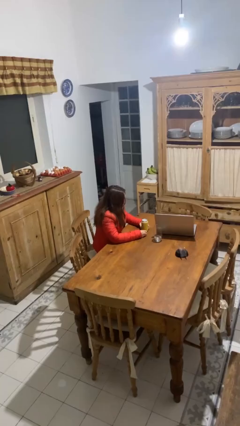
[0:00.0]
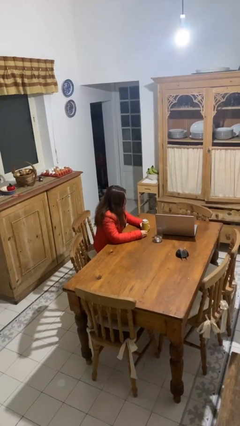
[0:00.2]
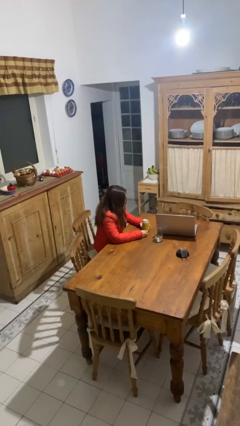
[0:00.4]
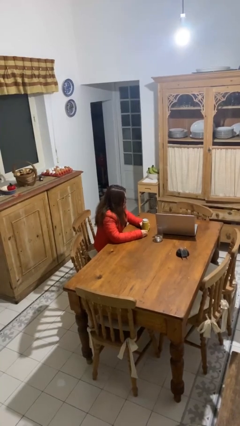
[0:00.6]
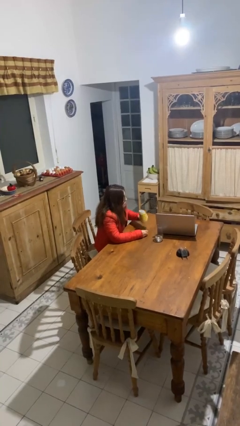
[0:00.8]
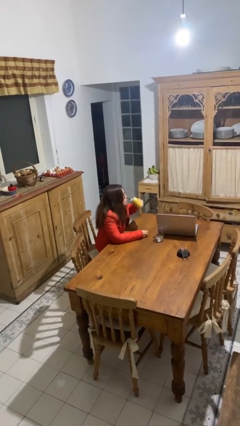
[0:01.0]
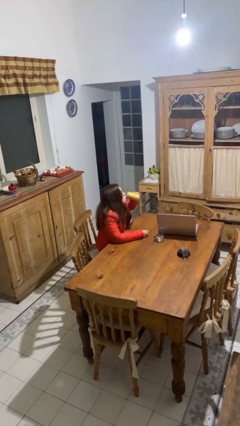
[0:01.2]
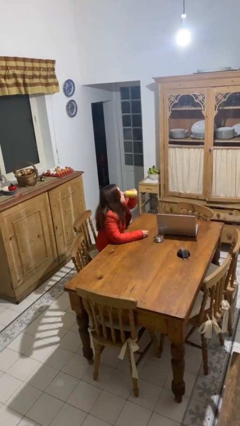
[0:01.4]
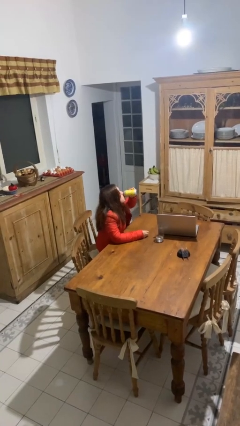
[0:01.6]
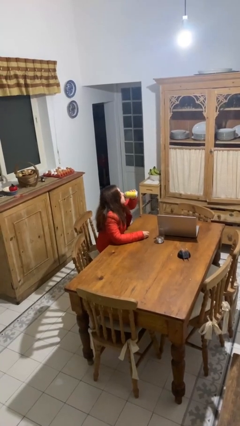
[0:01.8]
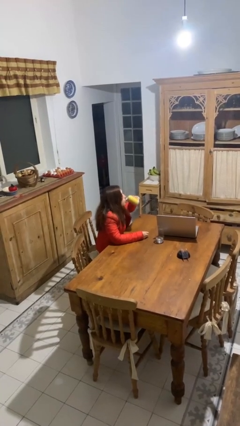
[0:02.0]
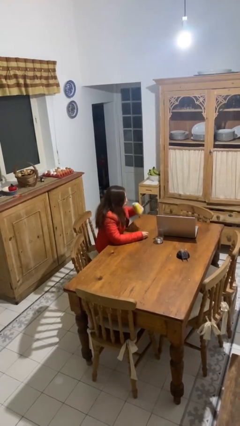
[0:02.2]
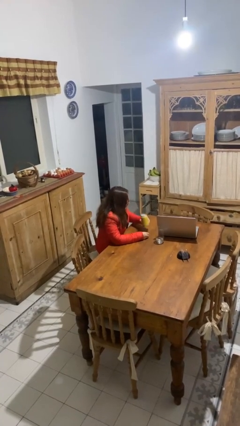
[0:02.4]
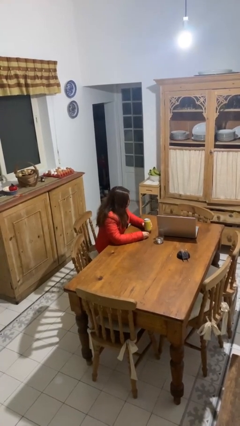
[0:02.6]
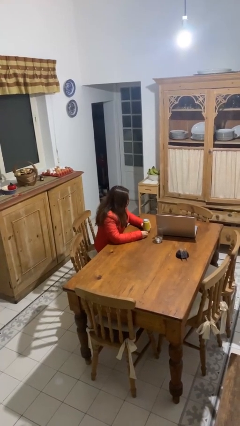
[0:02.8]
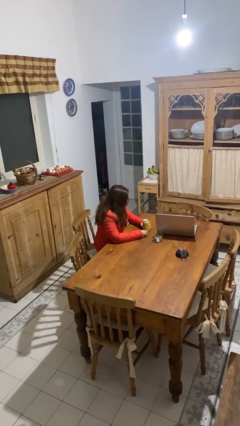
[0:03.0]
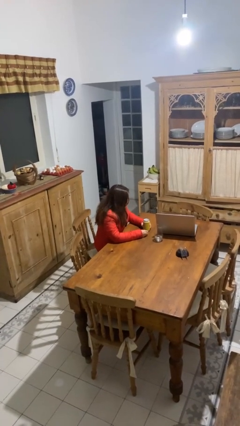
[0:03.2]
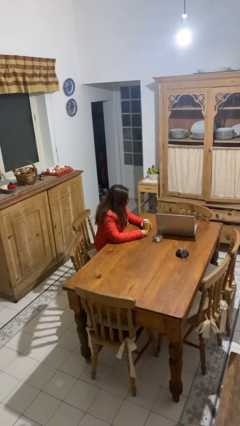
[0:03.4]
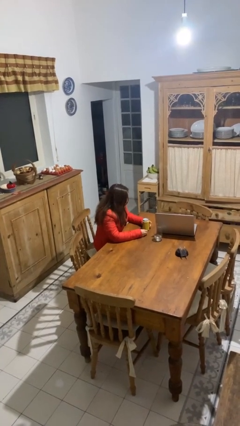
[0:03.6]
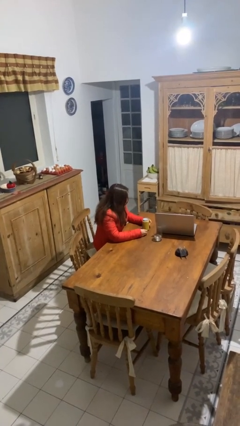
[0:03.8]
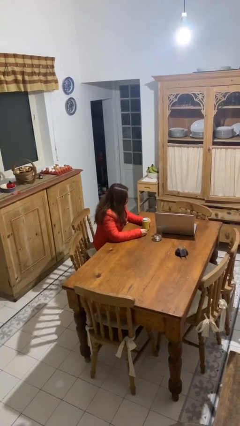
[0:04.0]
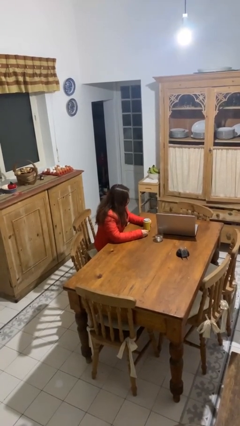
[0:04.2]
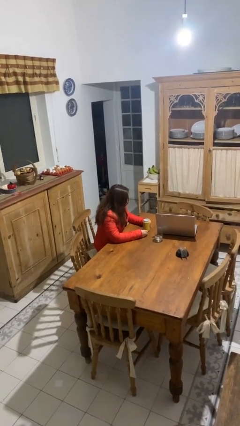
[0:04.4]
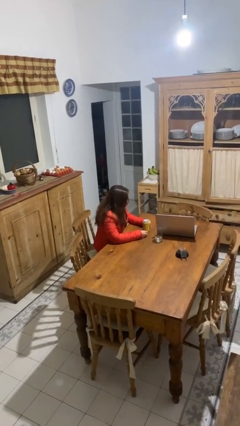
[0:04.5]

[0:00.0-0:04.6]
person drinks from beverage can

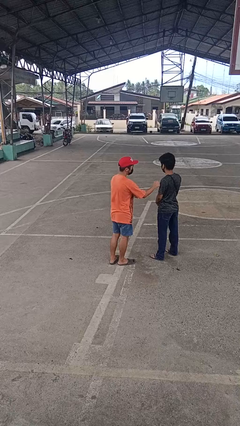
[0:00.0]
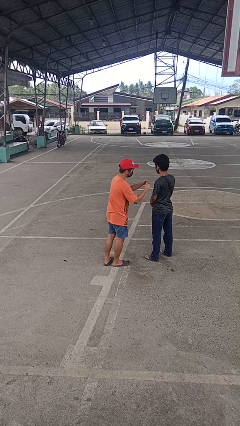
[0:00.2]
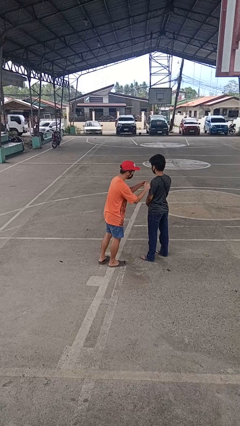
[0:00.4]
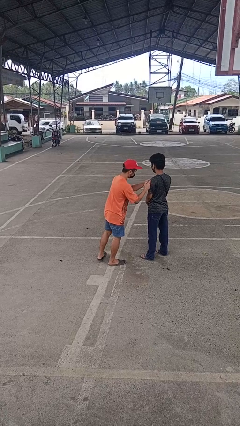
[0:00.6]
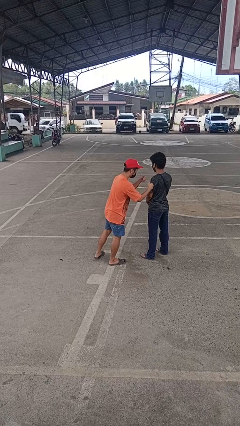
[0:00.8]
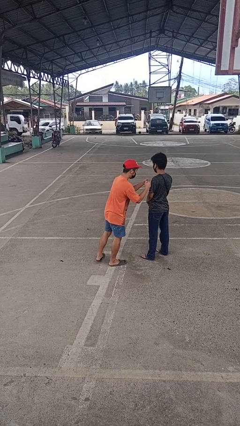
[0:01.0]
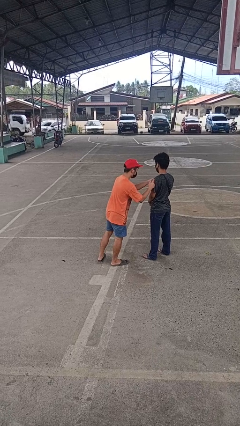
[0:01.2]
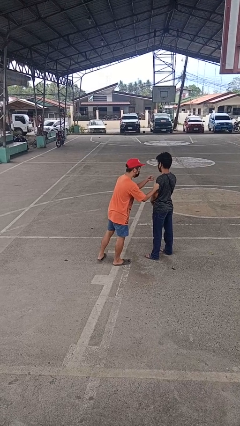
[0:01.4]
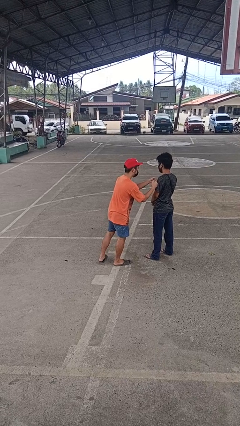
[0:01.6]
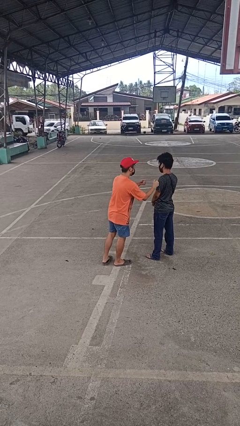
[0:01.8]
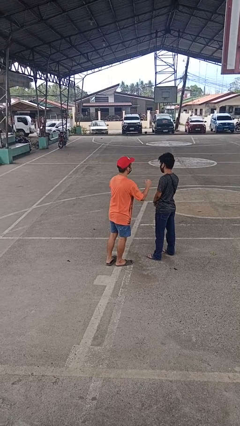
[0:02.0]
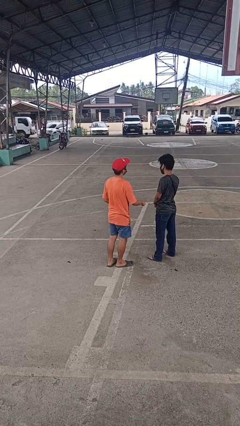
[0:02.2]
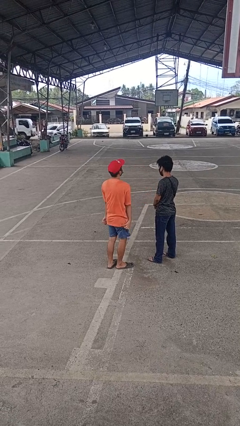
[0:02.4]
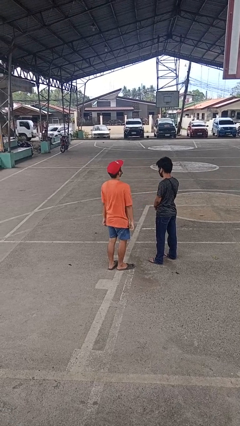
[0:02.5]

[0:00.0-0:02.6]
person pounds shoulders of person

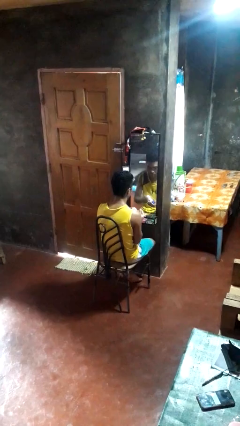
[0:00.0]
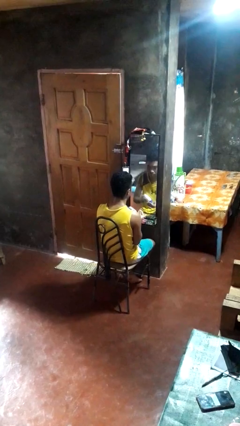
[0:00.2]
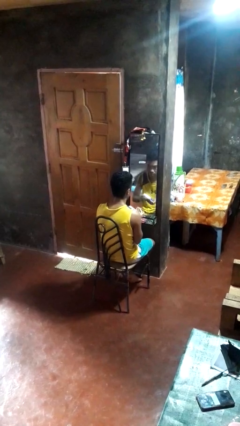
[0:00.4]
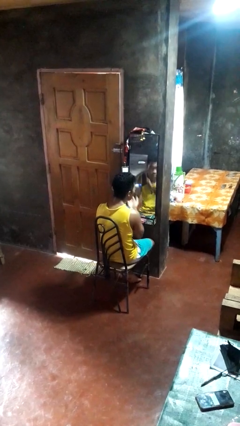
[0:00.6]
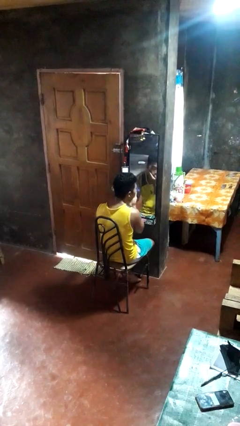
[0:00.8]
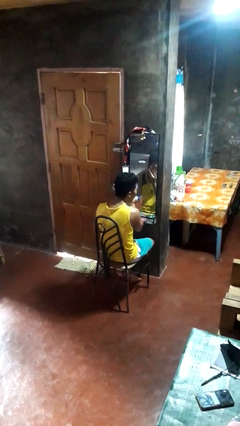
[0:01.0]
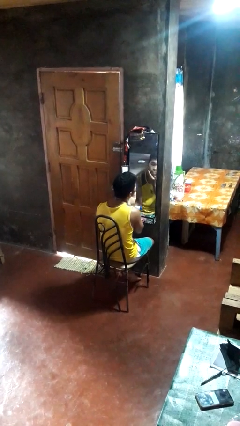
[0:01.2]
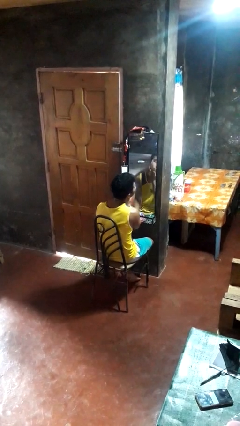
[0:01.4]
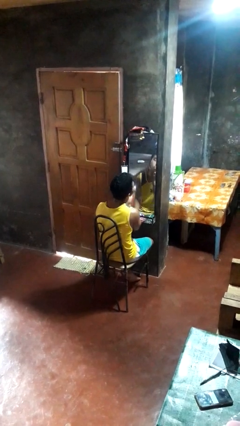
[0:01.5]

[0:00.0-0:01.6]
person applies foundation makeup

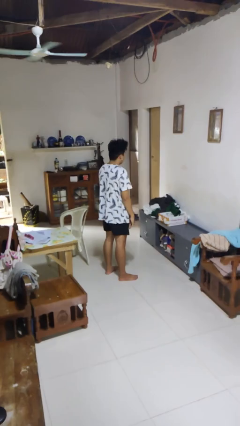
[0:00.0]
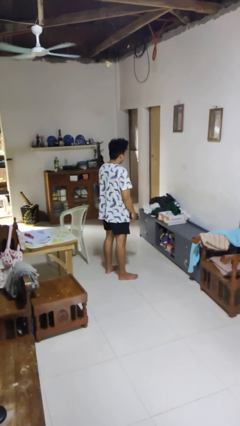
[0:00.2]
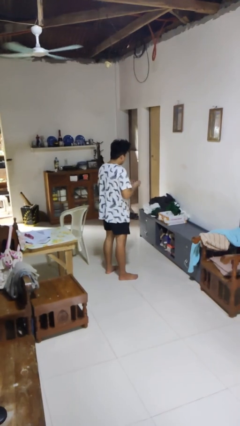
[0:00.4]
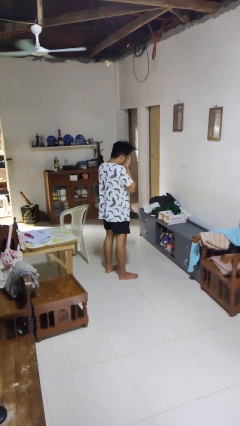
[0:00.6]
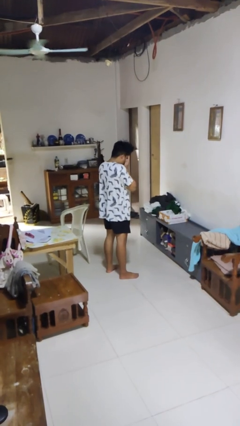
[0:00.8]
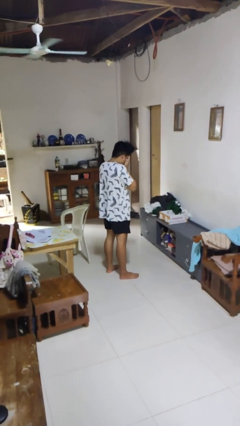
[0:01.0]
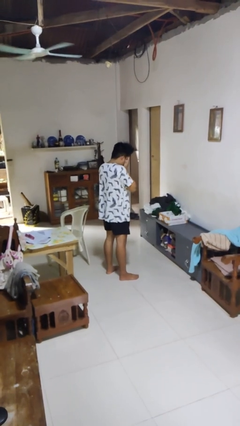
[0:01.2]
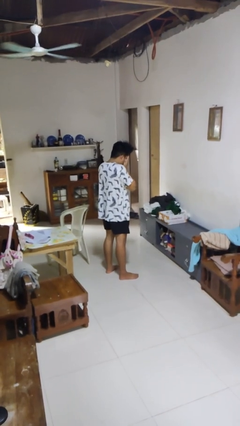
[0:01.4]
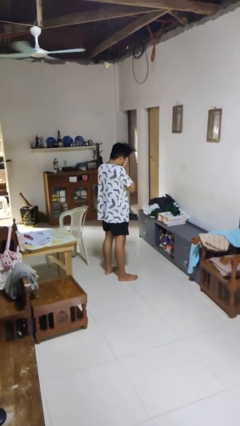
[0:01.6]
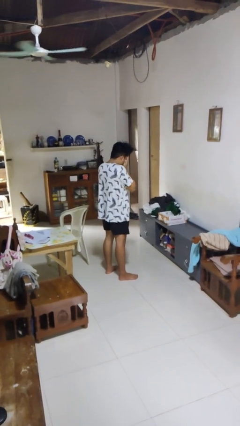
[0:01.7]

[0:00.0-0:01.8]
person covers face with hands

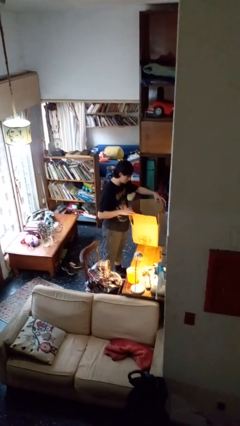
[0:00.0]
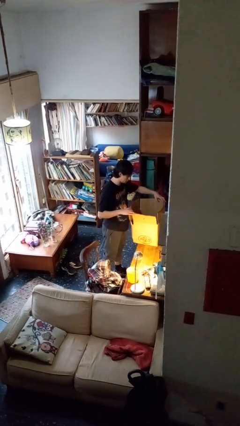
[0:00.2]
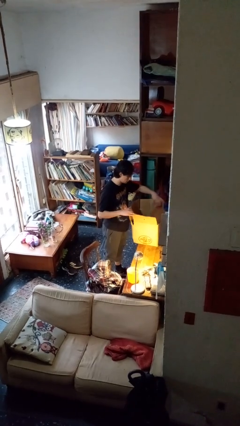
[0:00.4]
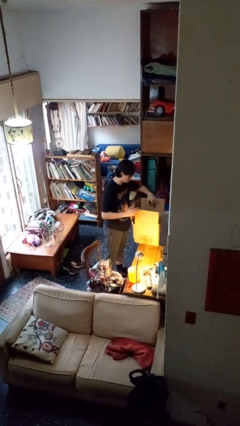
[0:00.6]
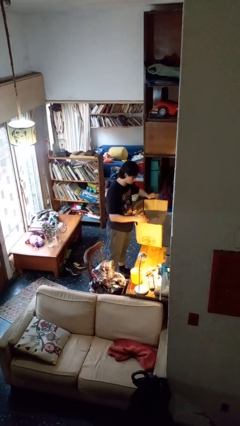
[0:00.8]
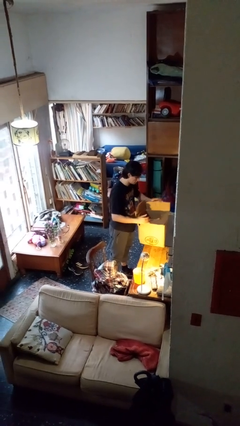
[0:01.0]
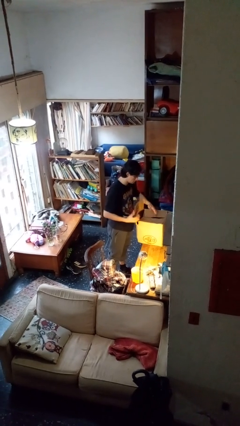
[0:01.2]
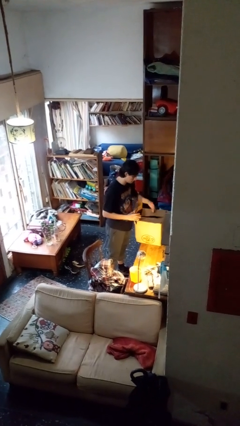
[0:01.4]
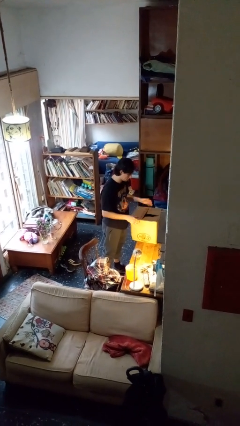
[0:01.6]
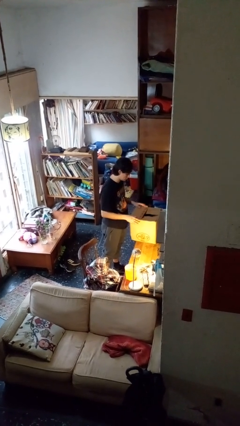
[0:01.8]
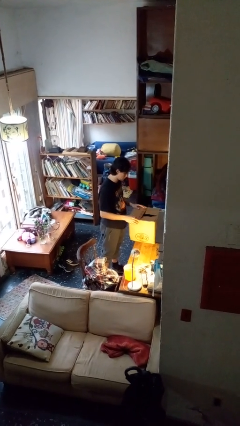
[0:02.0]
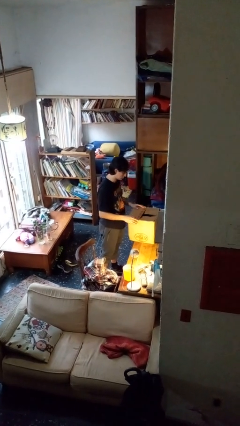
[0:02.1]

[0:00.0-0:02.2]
person closes box

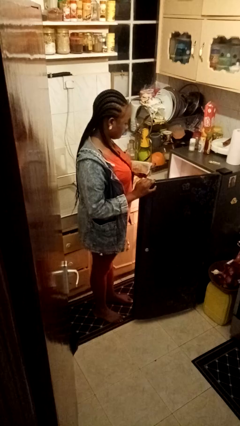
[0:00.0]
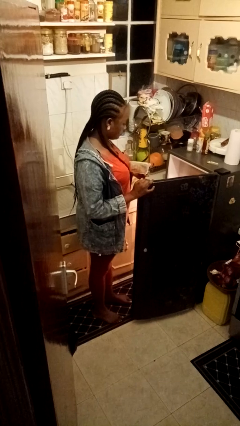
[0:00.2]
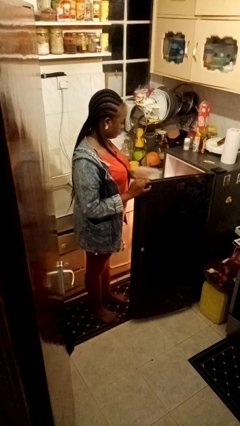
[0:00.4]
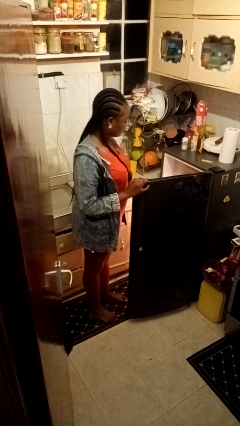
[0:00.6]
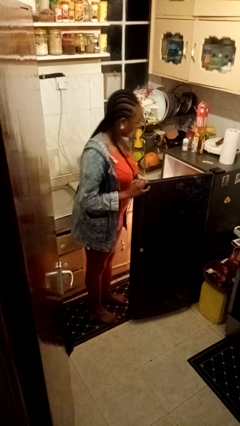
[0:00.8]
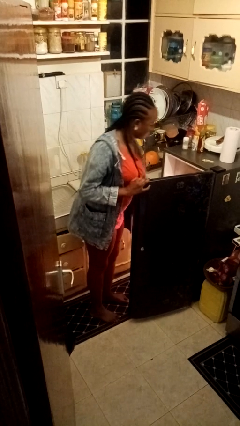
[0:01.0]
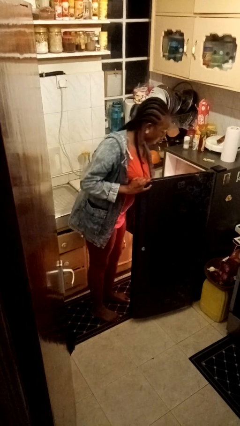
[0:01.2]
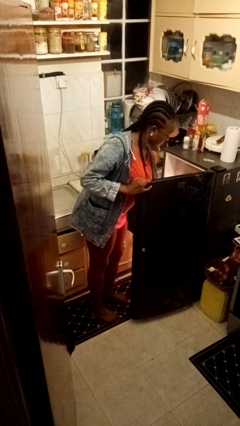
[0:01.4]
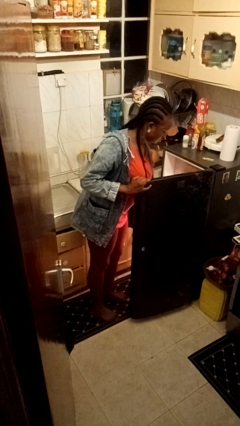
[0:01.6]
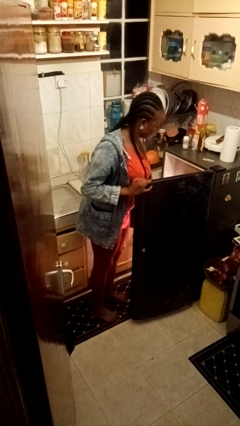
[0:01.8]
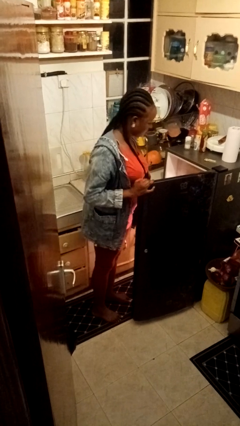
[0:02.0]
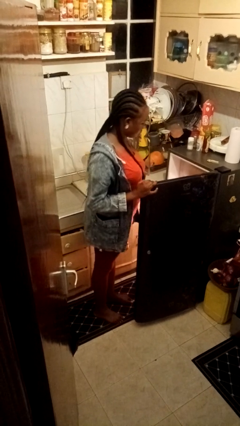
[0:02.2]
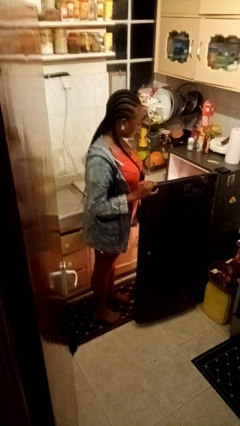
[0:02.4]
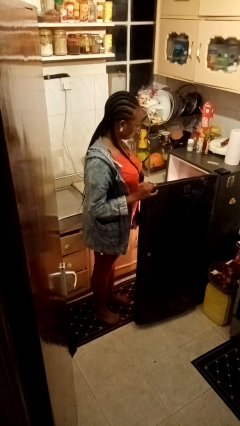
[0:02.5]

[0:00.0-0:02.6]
person puts object into refrigerator

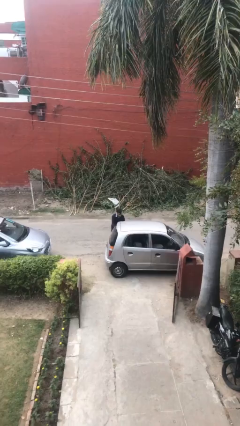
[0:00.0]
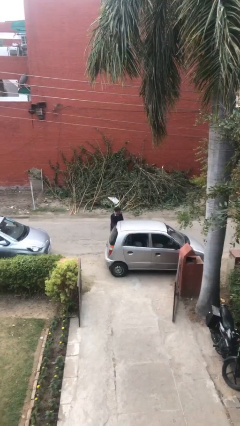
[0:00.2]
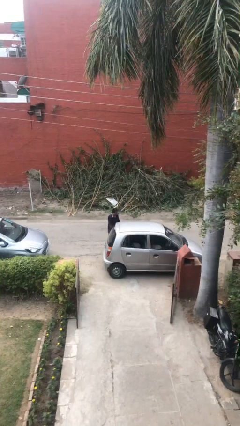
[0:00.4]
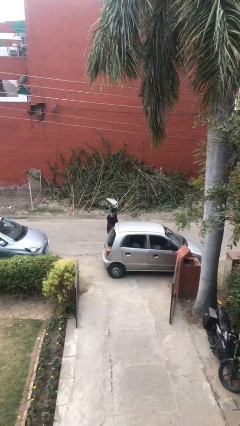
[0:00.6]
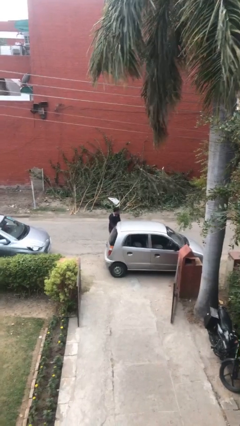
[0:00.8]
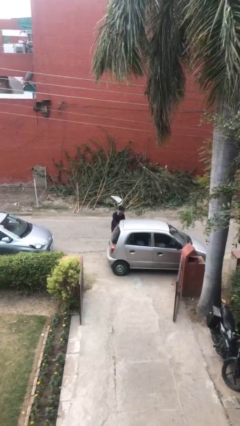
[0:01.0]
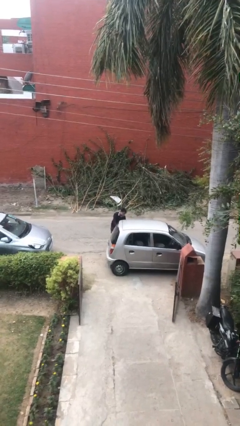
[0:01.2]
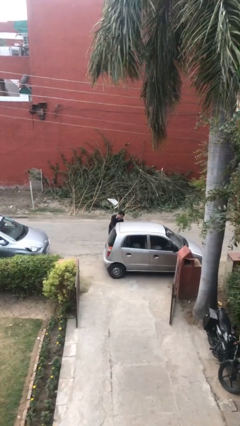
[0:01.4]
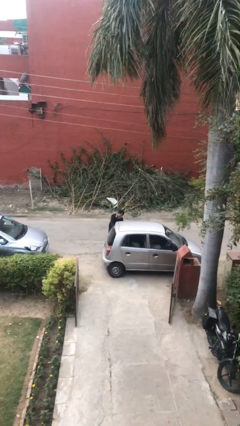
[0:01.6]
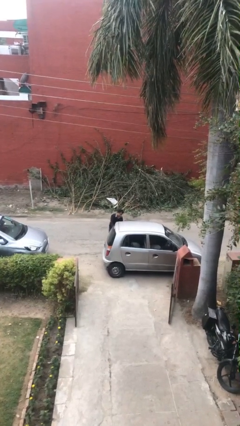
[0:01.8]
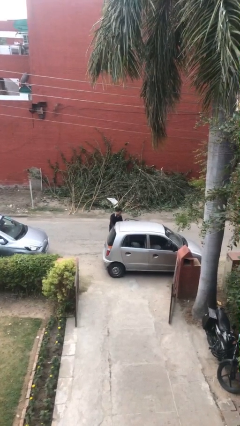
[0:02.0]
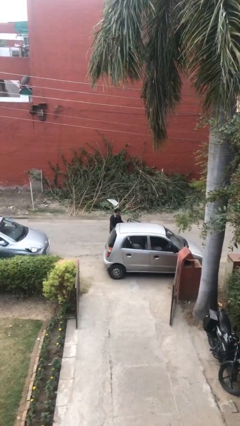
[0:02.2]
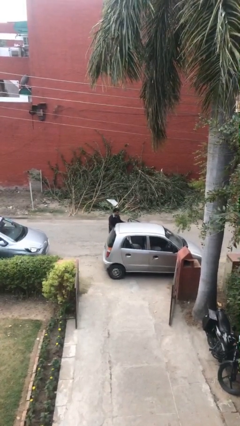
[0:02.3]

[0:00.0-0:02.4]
person opens car door
